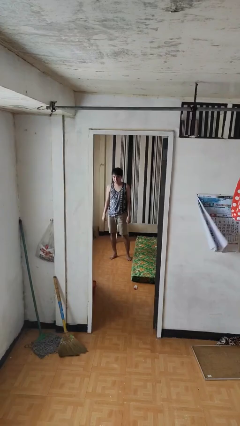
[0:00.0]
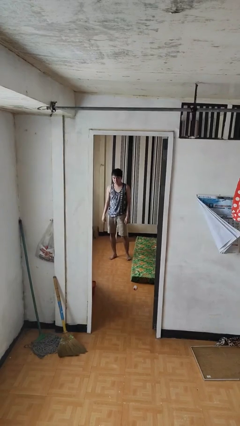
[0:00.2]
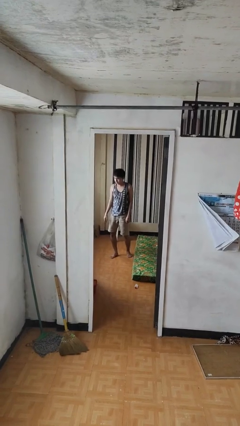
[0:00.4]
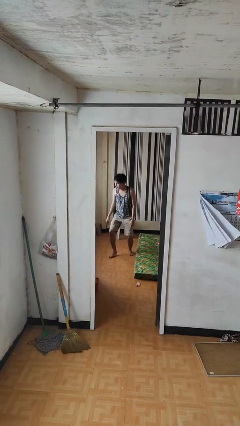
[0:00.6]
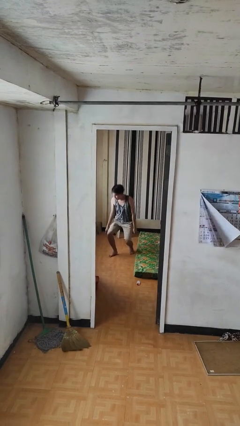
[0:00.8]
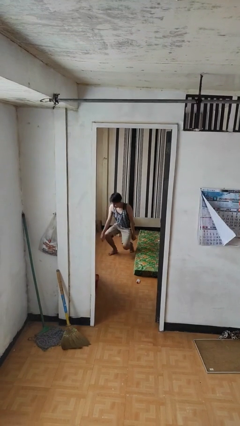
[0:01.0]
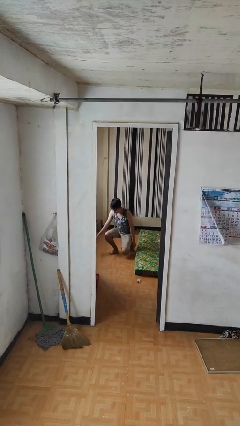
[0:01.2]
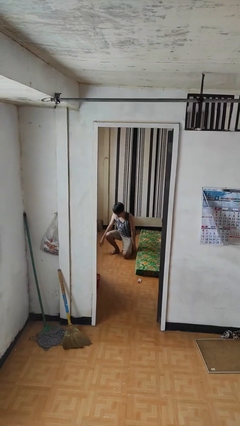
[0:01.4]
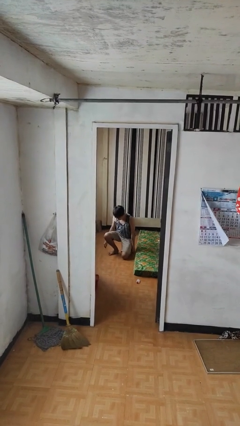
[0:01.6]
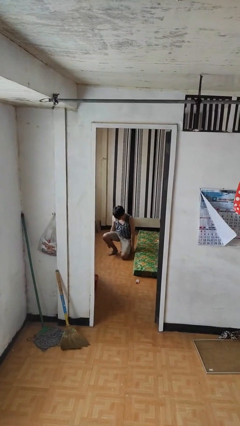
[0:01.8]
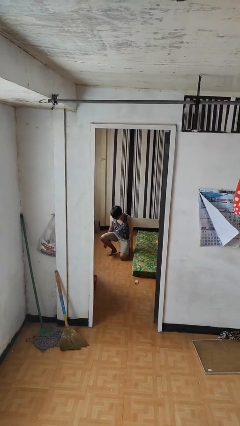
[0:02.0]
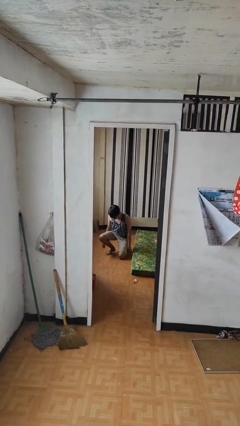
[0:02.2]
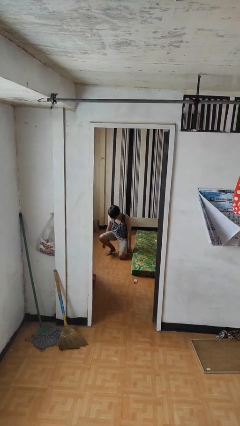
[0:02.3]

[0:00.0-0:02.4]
person kneels

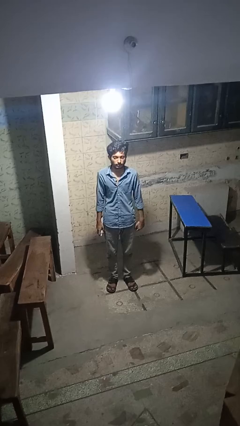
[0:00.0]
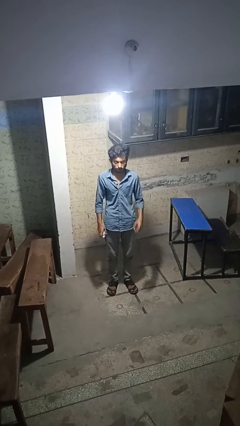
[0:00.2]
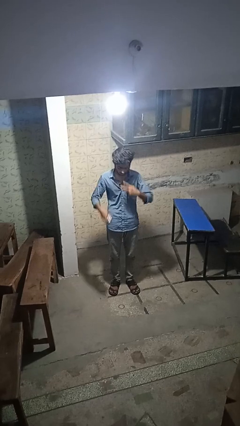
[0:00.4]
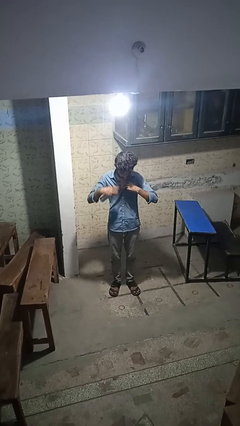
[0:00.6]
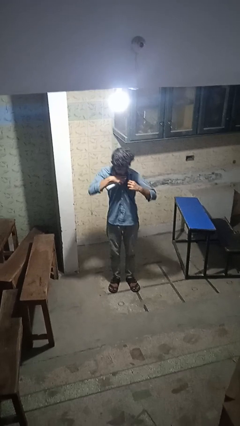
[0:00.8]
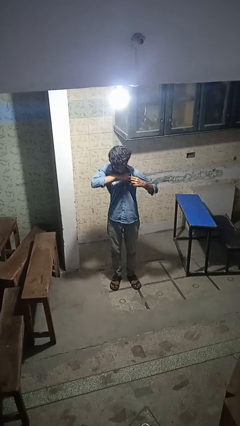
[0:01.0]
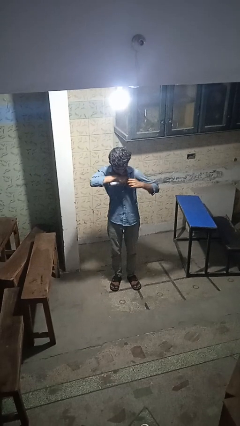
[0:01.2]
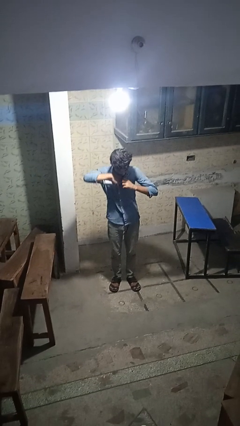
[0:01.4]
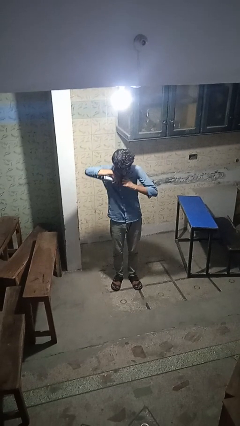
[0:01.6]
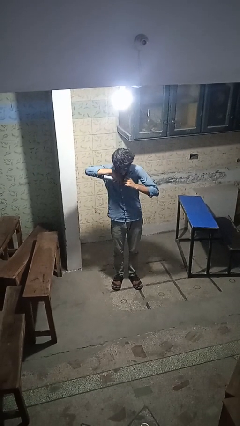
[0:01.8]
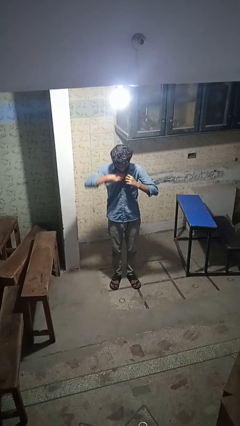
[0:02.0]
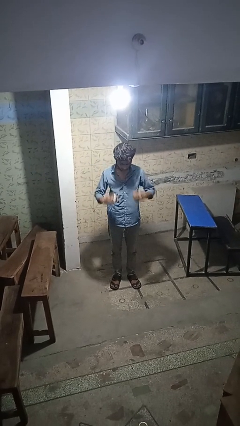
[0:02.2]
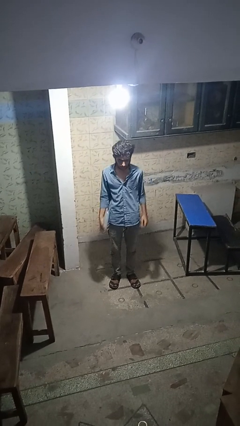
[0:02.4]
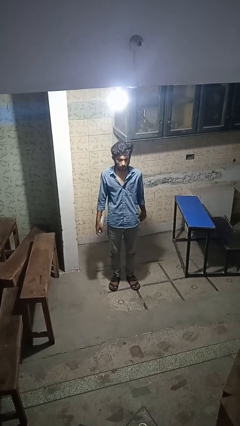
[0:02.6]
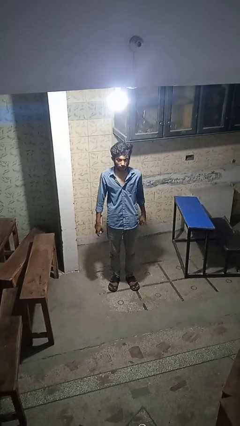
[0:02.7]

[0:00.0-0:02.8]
person applies deodorant

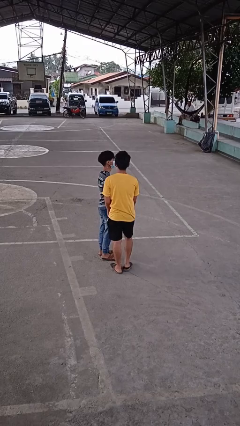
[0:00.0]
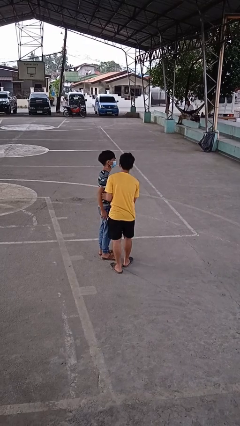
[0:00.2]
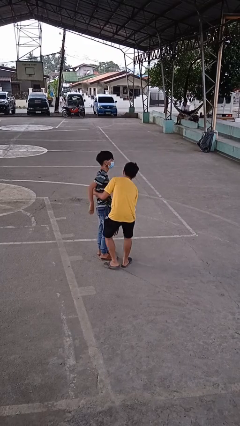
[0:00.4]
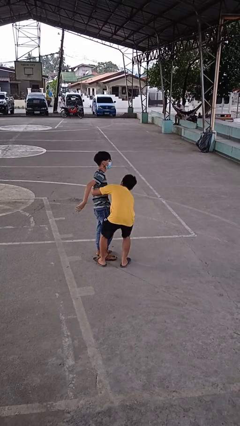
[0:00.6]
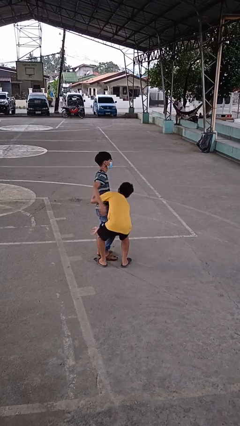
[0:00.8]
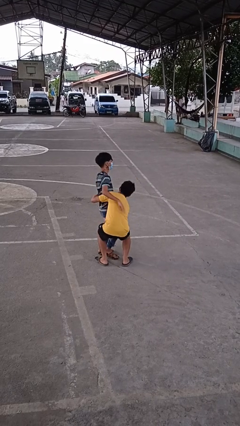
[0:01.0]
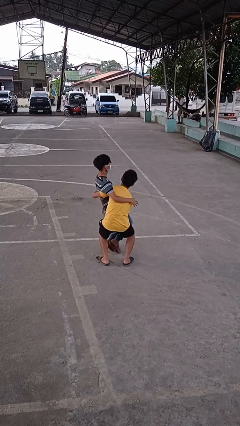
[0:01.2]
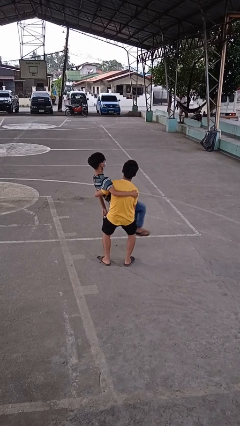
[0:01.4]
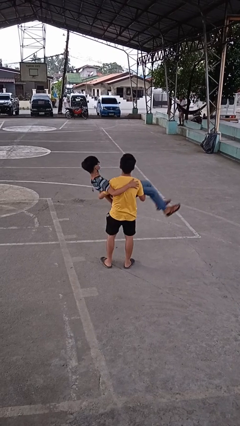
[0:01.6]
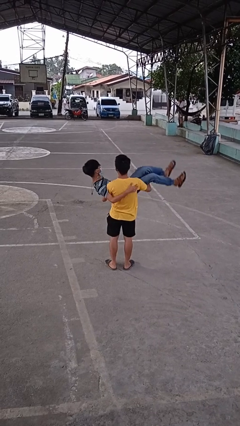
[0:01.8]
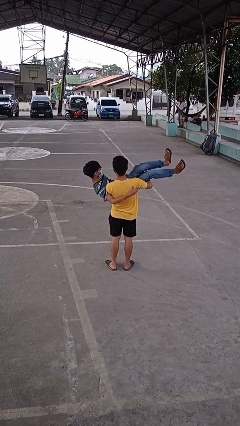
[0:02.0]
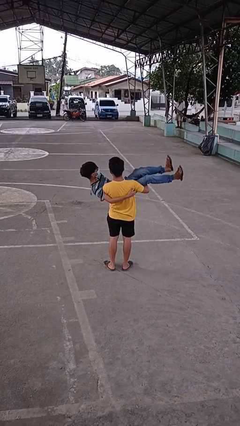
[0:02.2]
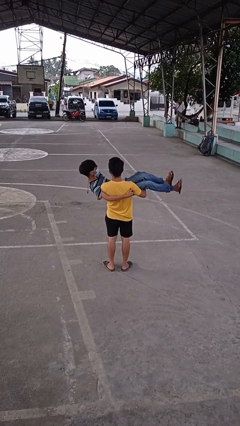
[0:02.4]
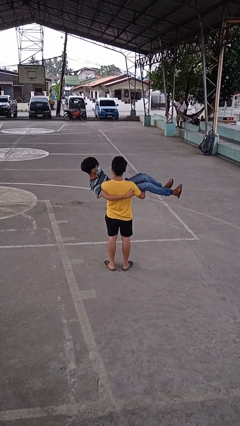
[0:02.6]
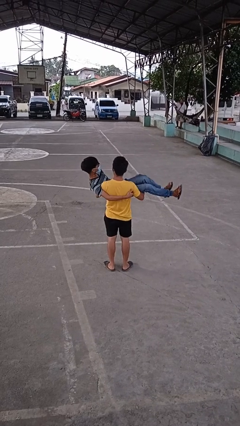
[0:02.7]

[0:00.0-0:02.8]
person picks up person

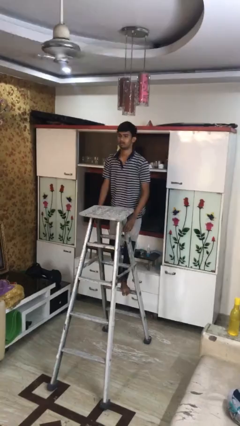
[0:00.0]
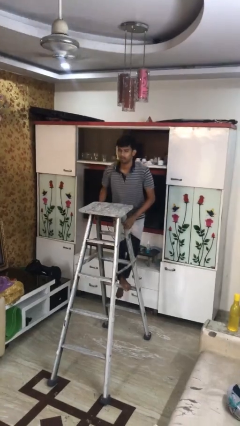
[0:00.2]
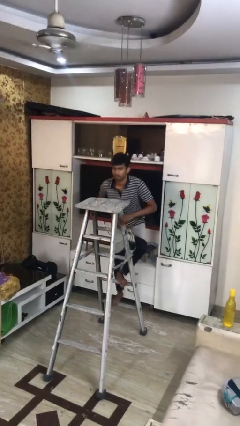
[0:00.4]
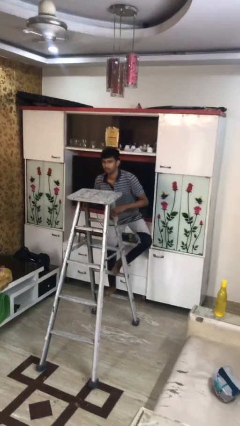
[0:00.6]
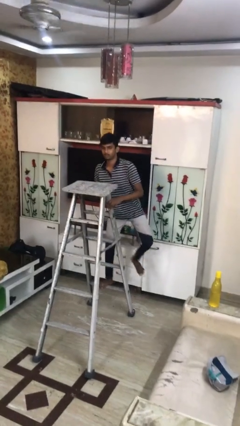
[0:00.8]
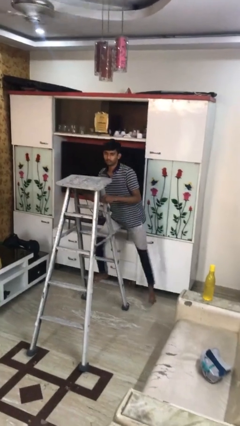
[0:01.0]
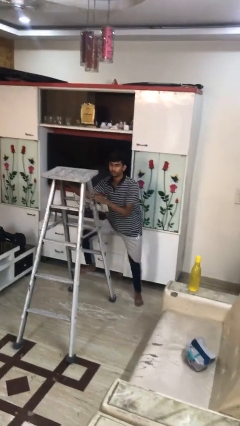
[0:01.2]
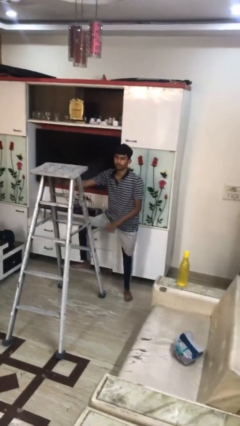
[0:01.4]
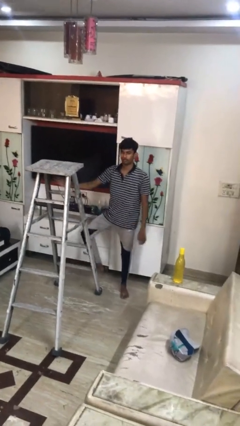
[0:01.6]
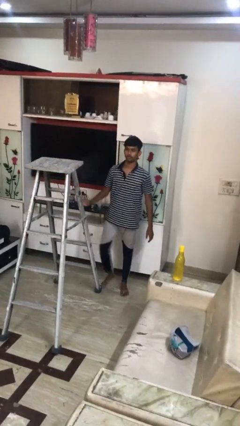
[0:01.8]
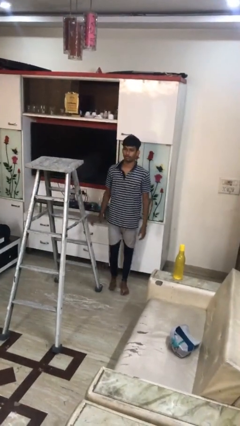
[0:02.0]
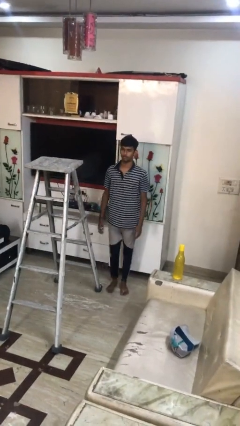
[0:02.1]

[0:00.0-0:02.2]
person climbs down ladder

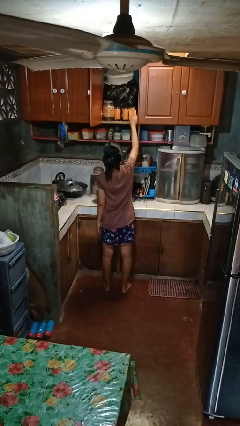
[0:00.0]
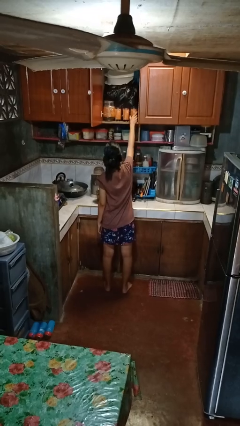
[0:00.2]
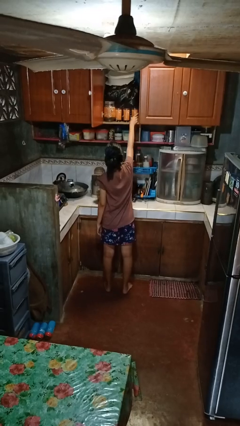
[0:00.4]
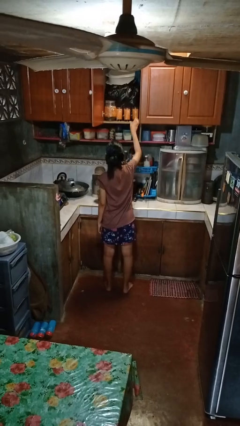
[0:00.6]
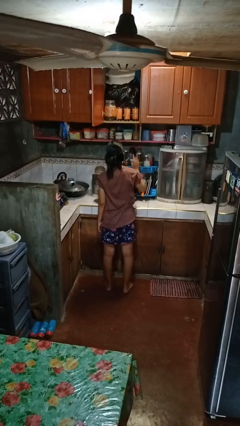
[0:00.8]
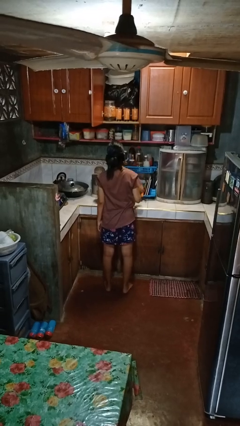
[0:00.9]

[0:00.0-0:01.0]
person puts object in cabinet

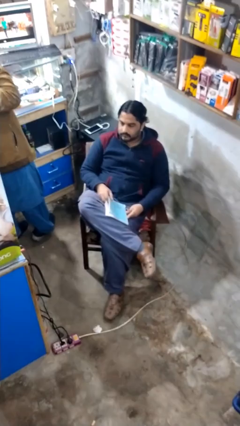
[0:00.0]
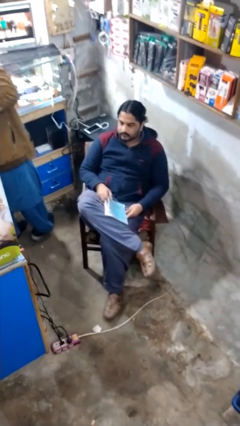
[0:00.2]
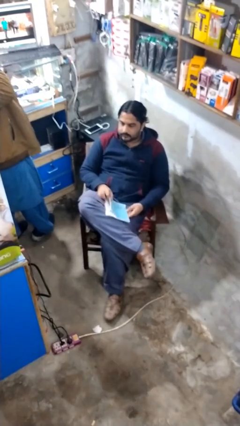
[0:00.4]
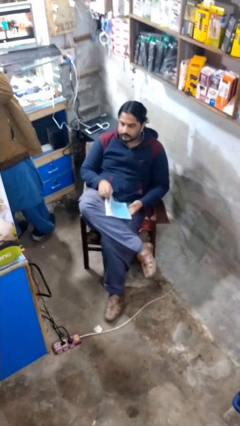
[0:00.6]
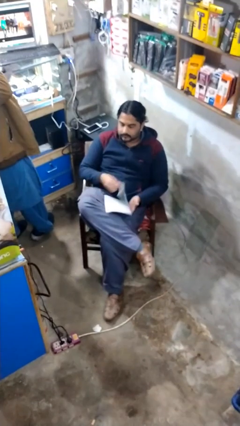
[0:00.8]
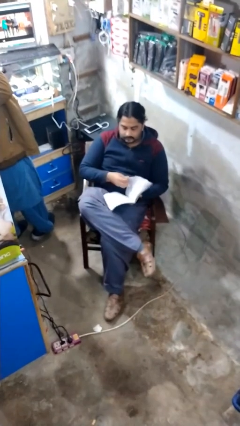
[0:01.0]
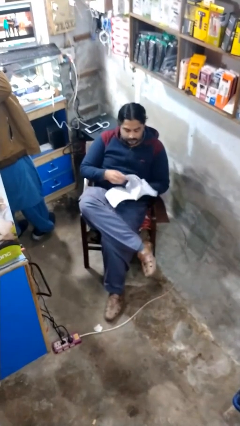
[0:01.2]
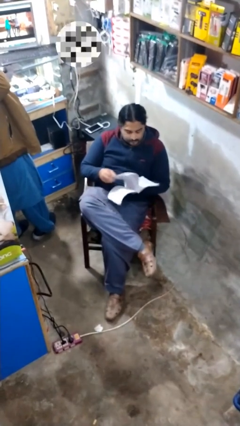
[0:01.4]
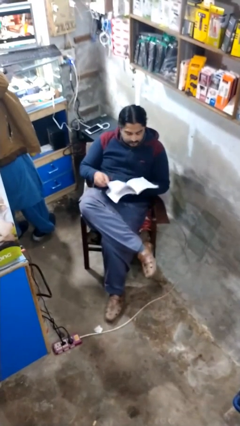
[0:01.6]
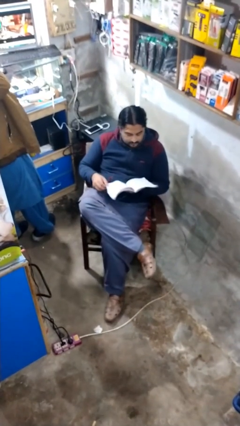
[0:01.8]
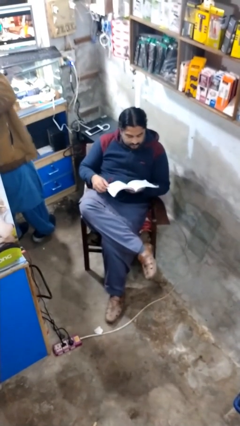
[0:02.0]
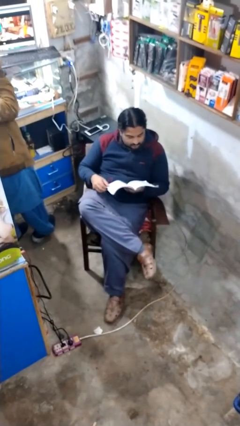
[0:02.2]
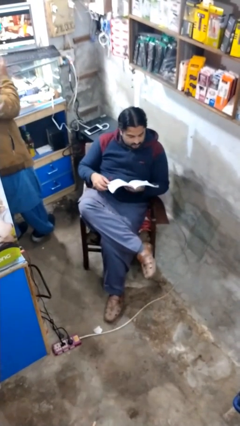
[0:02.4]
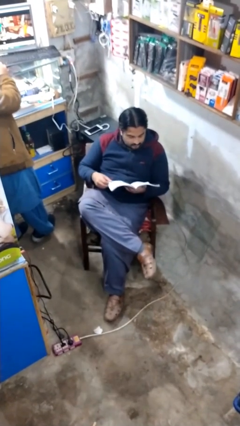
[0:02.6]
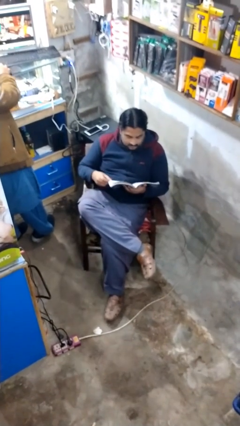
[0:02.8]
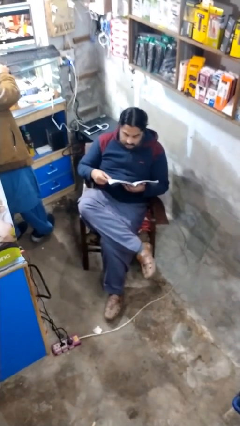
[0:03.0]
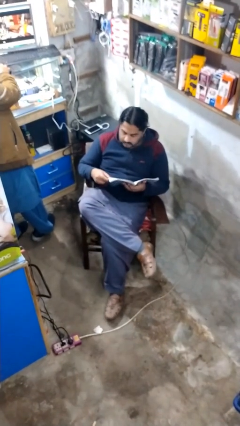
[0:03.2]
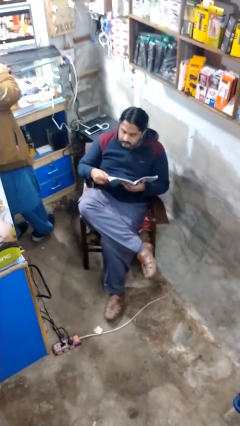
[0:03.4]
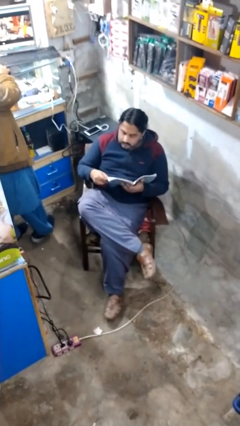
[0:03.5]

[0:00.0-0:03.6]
person reads document

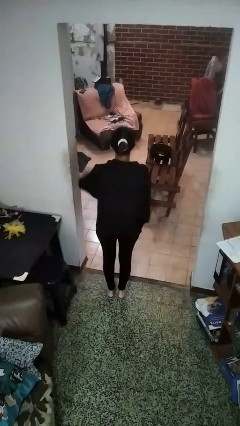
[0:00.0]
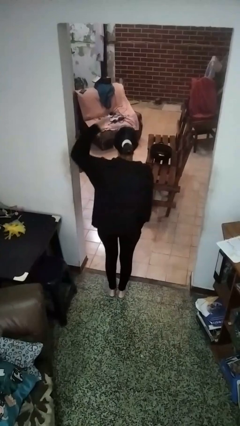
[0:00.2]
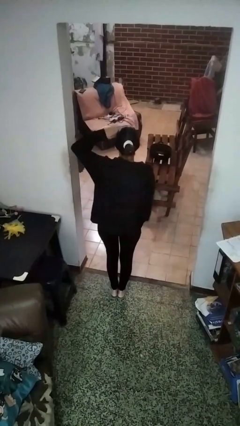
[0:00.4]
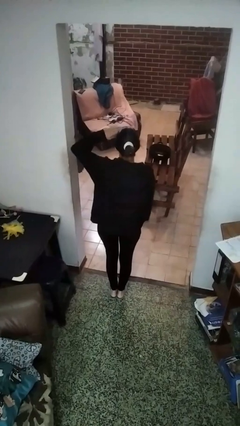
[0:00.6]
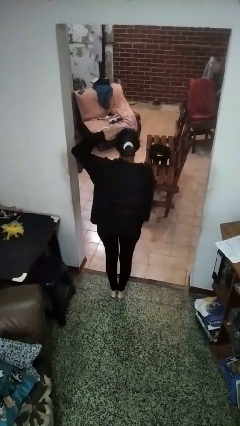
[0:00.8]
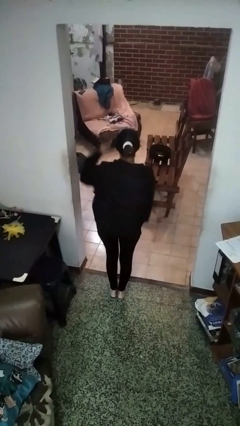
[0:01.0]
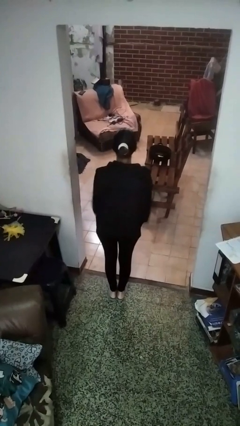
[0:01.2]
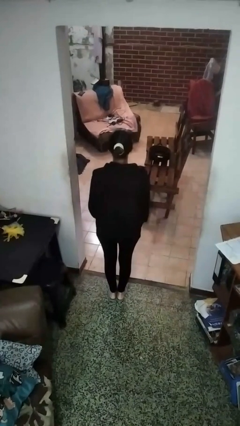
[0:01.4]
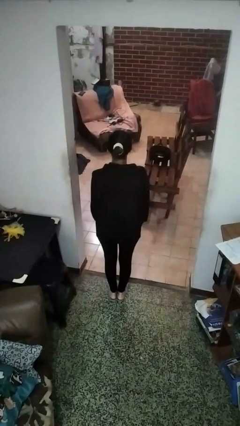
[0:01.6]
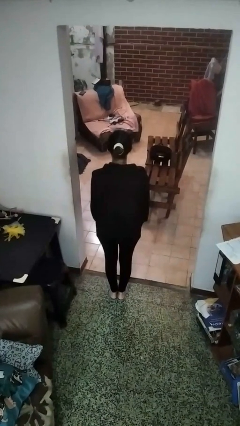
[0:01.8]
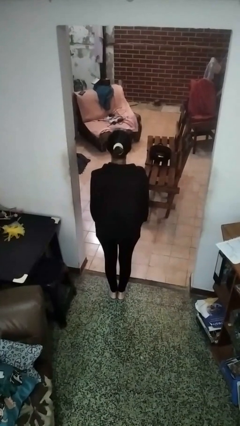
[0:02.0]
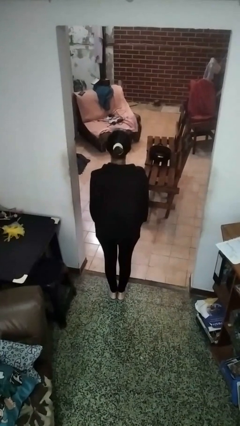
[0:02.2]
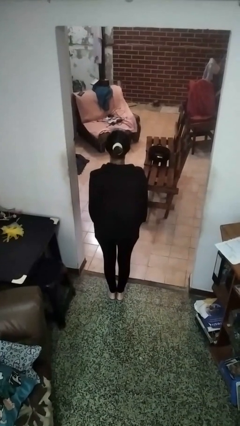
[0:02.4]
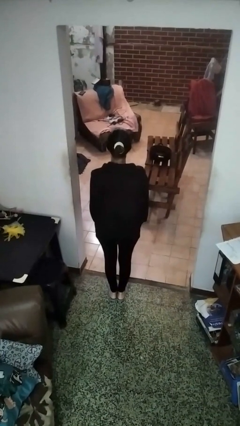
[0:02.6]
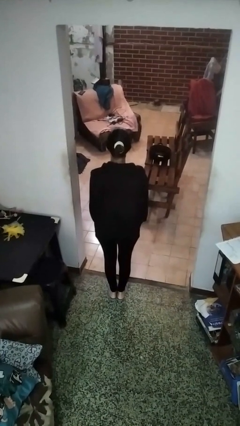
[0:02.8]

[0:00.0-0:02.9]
person salutes
